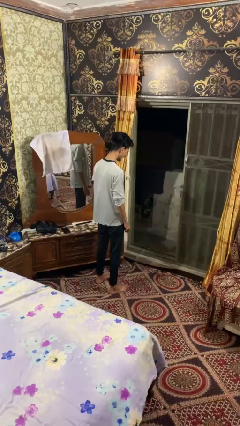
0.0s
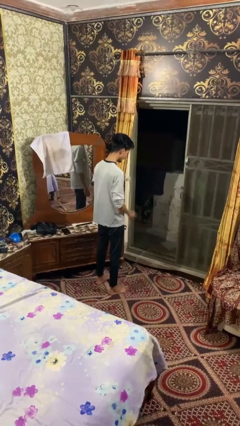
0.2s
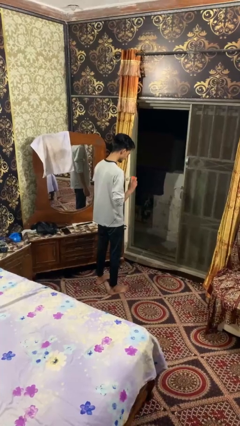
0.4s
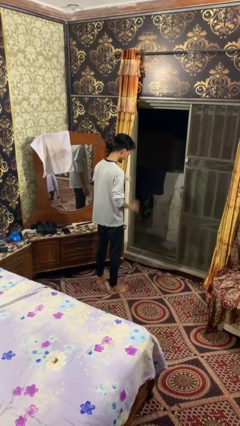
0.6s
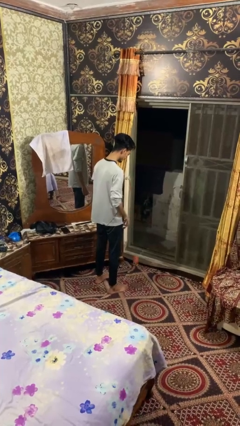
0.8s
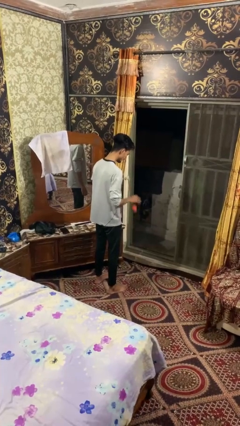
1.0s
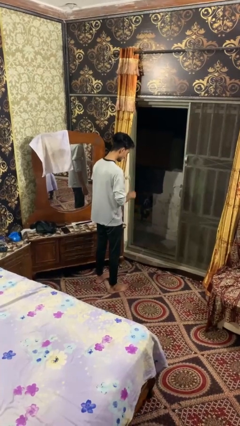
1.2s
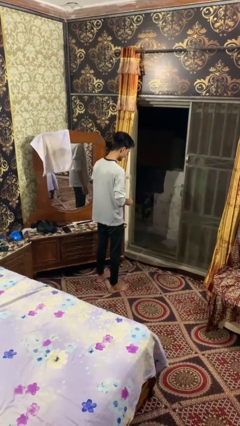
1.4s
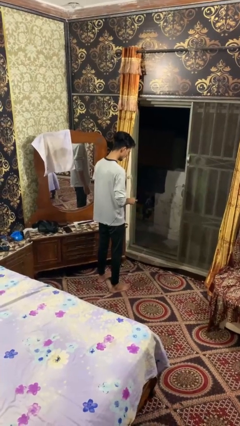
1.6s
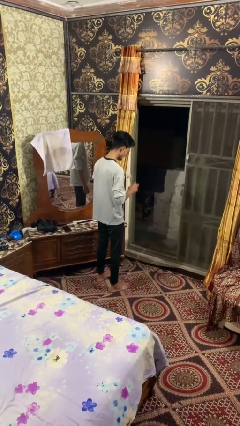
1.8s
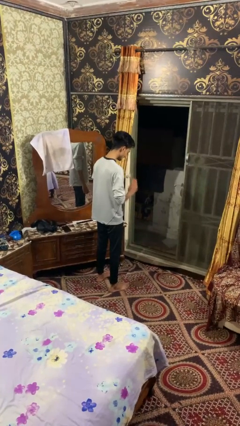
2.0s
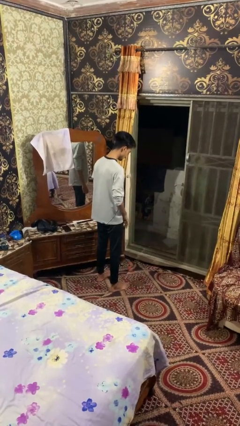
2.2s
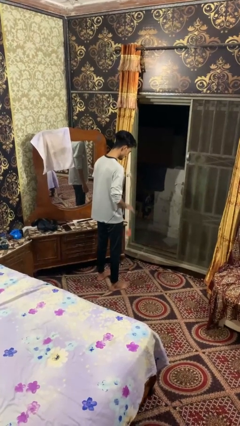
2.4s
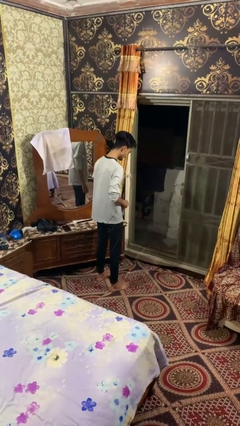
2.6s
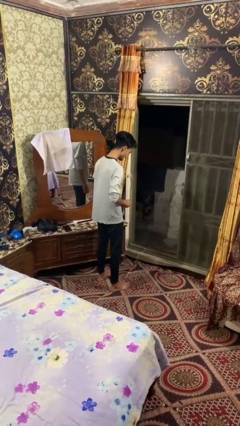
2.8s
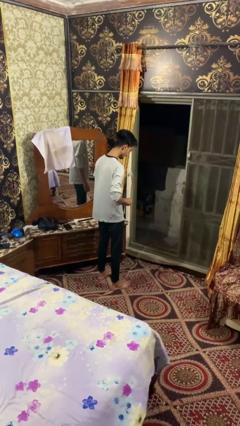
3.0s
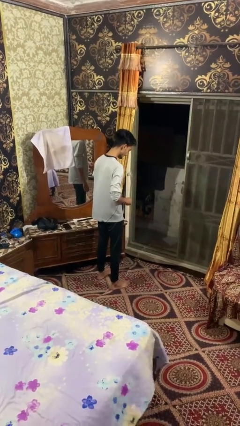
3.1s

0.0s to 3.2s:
person bounces ball on floor

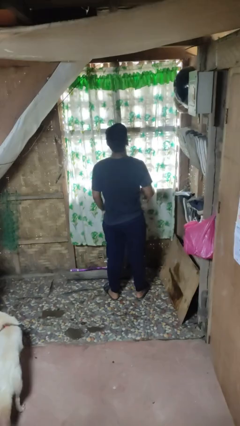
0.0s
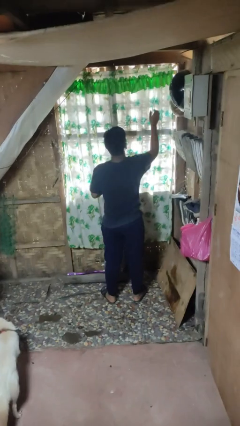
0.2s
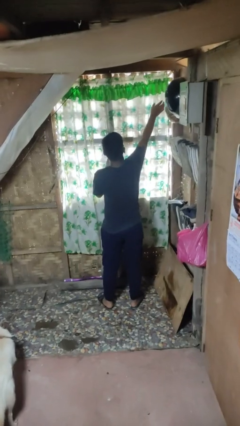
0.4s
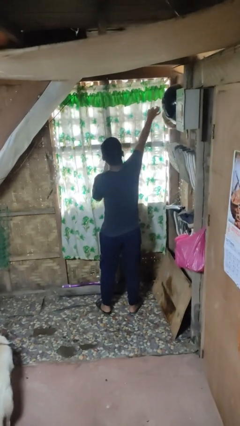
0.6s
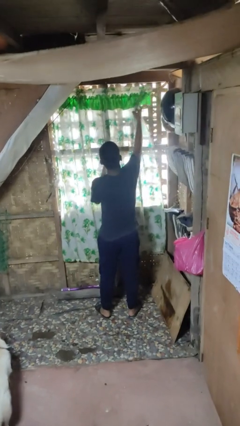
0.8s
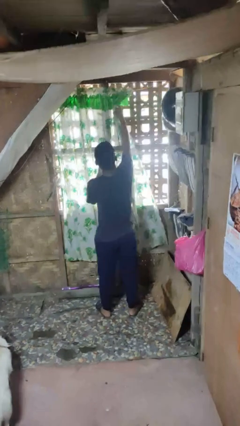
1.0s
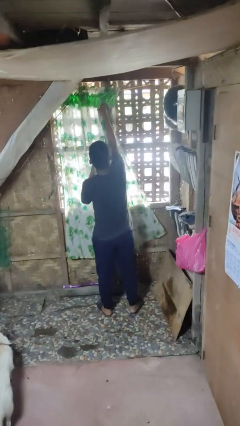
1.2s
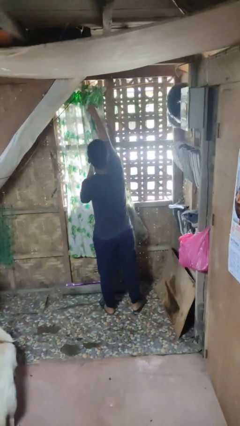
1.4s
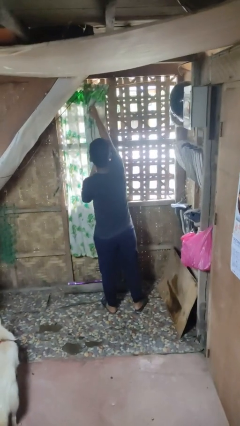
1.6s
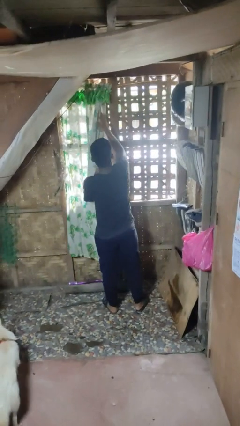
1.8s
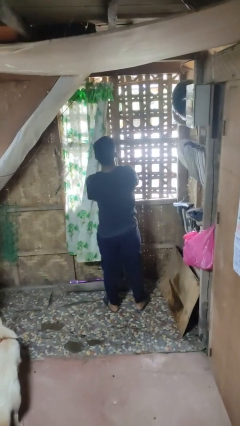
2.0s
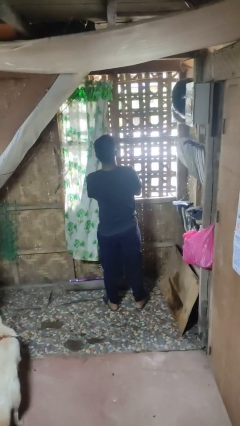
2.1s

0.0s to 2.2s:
person opens curtains

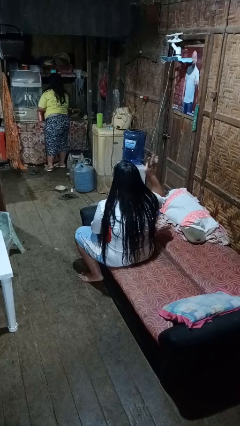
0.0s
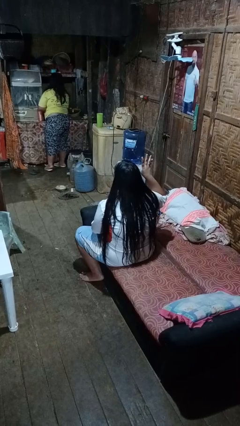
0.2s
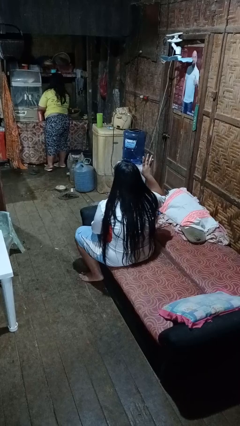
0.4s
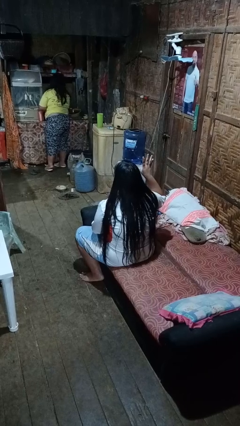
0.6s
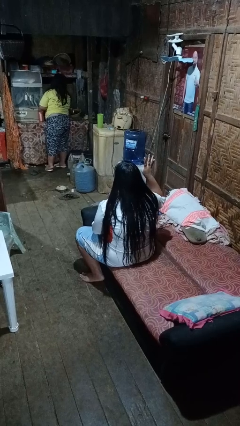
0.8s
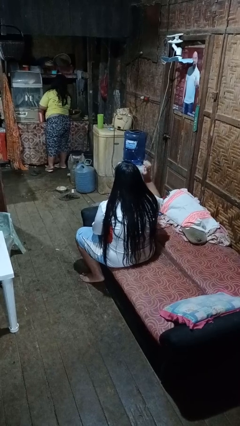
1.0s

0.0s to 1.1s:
person gestures number four

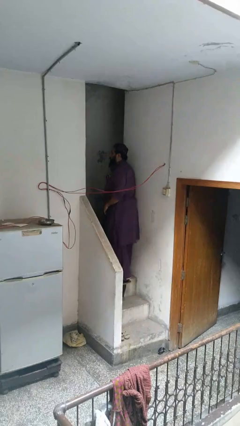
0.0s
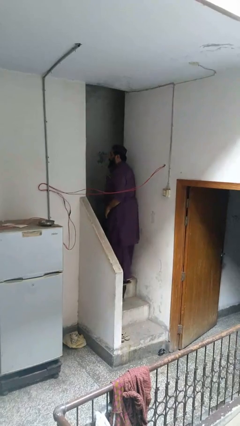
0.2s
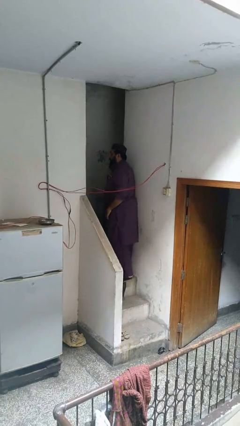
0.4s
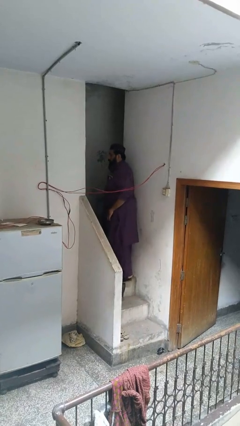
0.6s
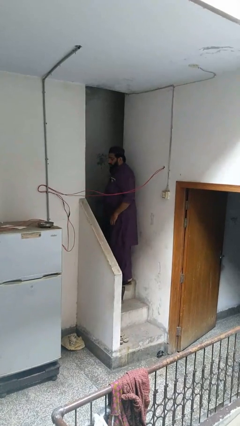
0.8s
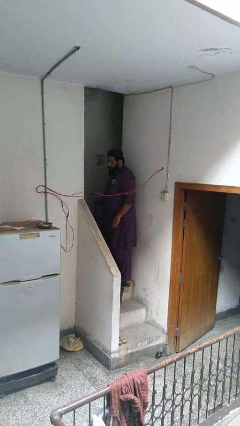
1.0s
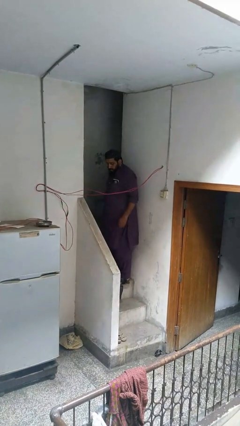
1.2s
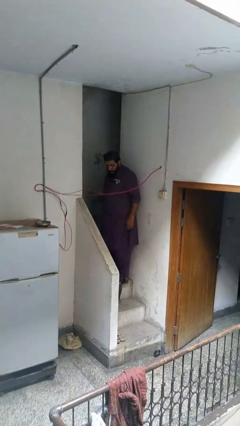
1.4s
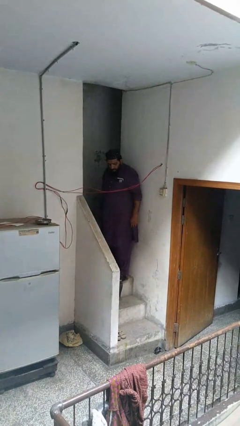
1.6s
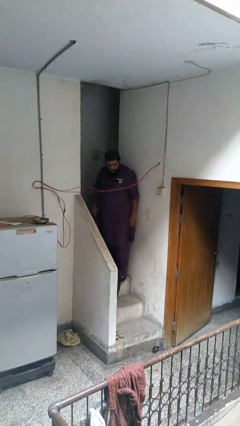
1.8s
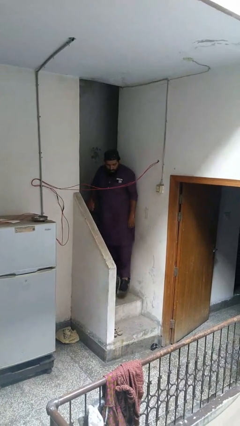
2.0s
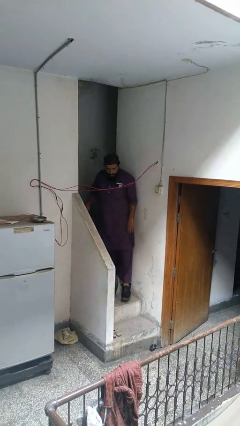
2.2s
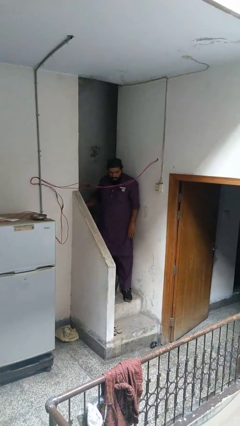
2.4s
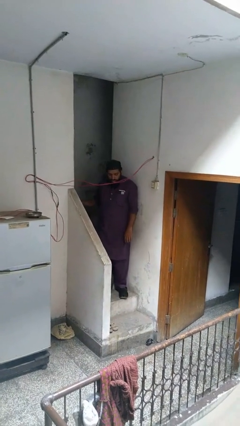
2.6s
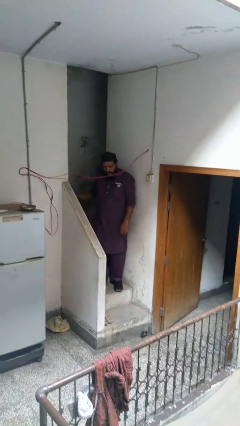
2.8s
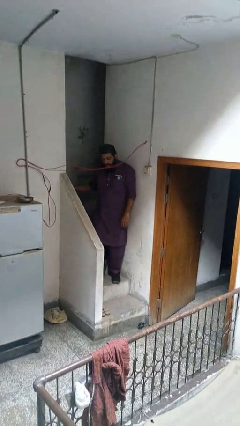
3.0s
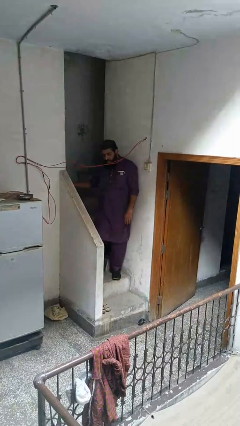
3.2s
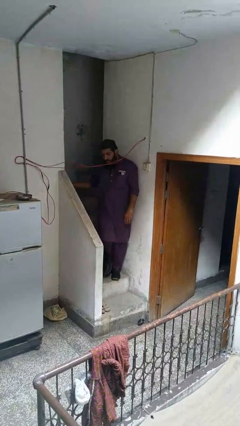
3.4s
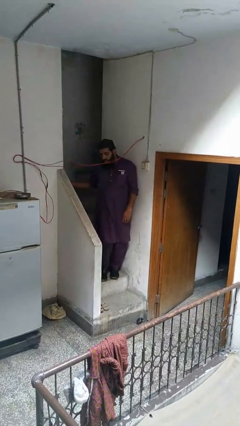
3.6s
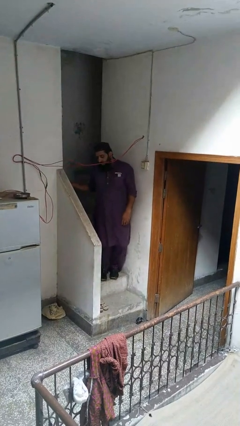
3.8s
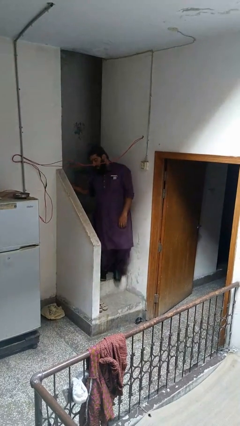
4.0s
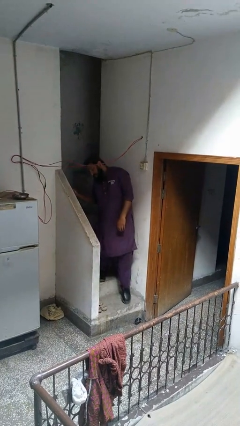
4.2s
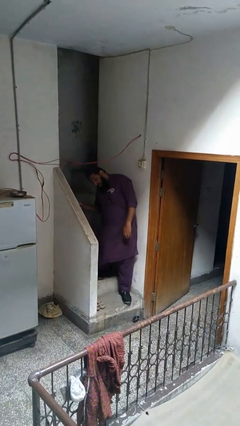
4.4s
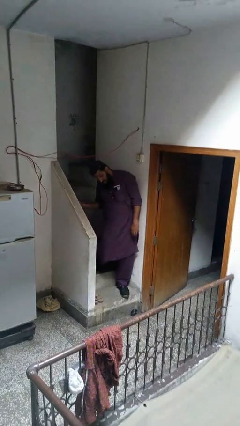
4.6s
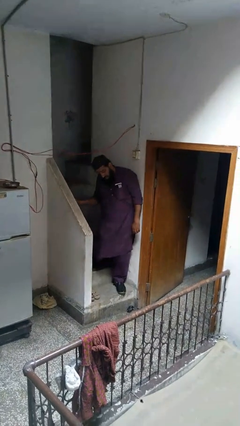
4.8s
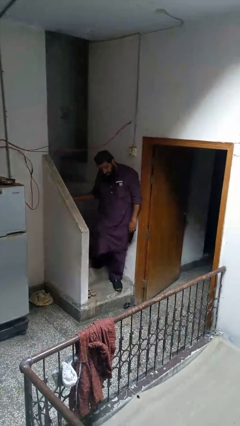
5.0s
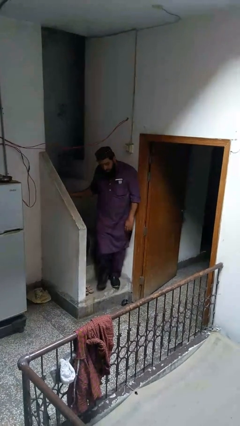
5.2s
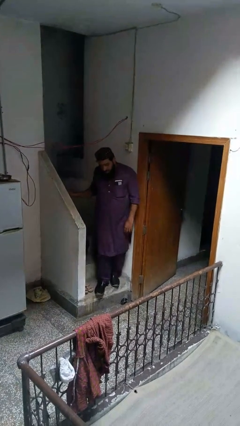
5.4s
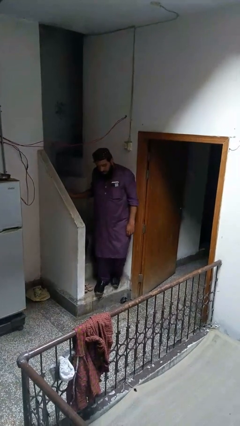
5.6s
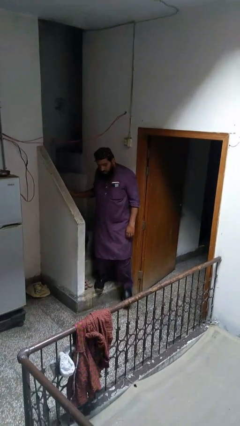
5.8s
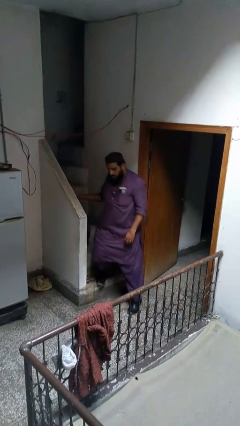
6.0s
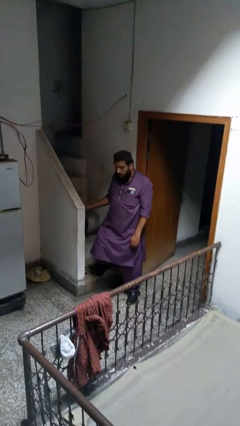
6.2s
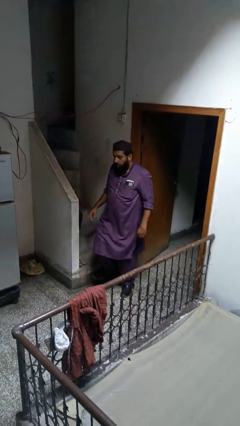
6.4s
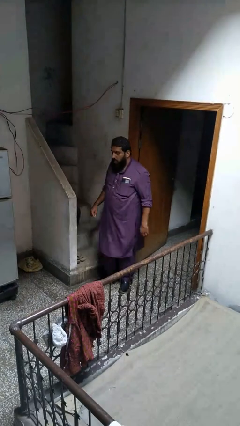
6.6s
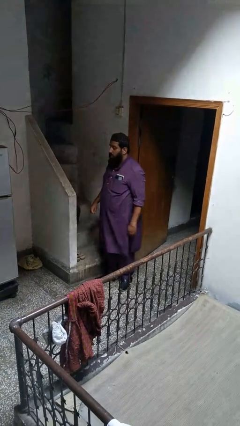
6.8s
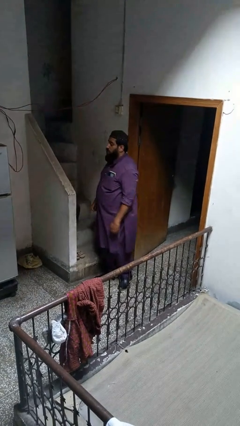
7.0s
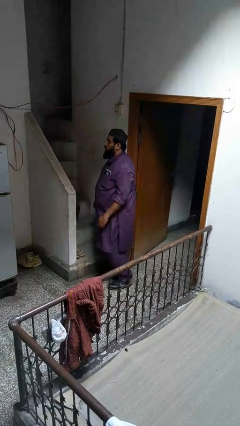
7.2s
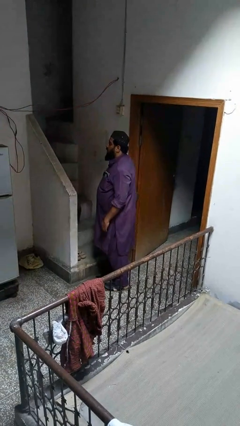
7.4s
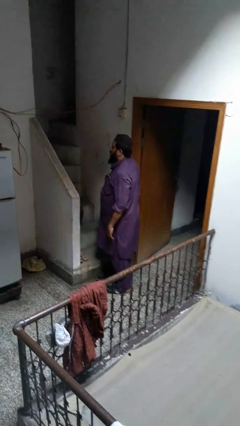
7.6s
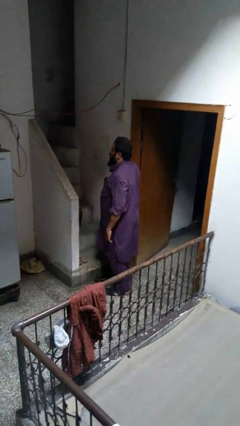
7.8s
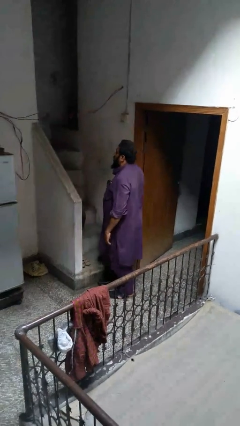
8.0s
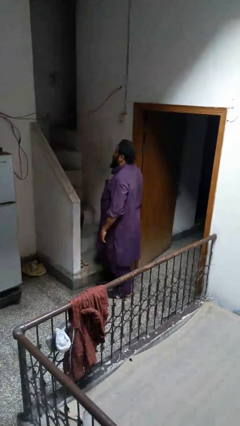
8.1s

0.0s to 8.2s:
person climbs down stairs

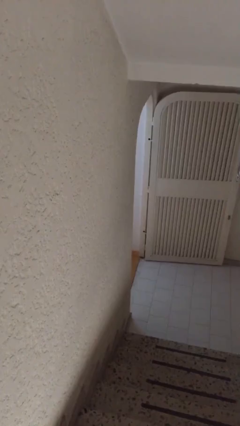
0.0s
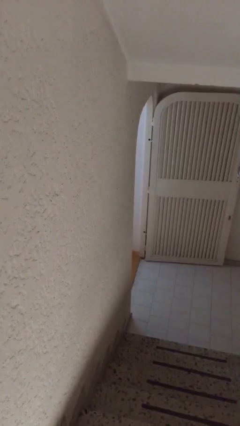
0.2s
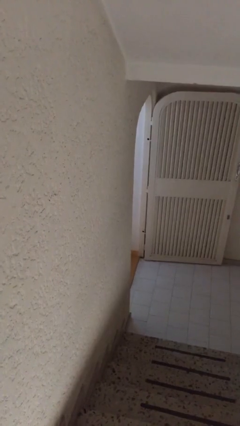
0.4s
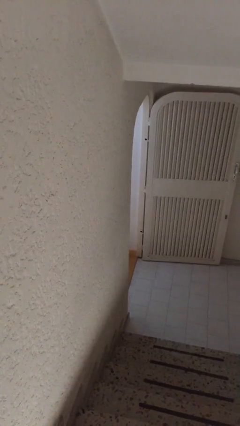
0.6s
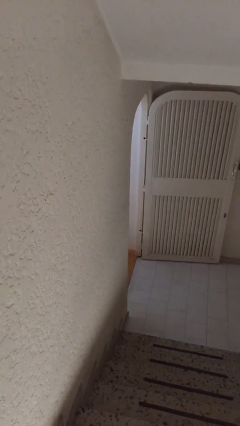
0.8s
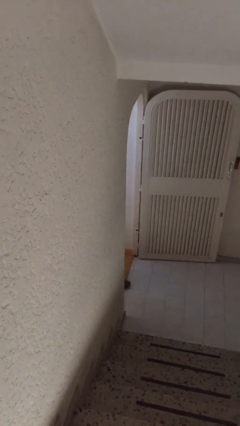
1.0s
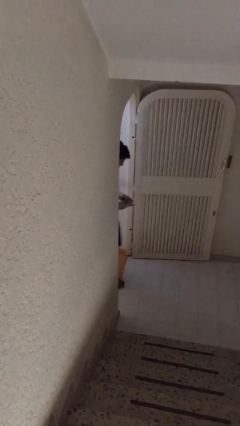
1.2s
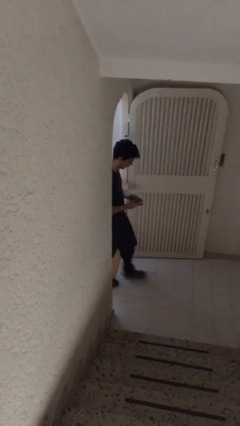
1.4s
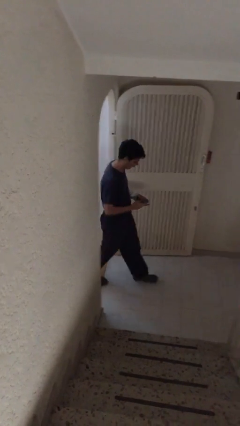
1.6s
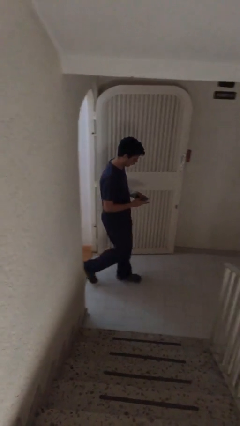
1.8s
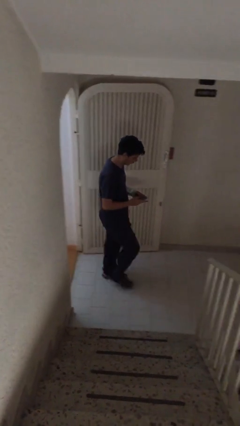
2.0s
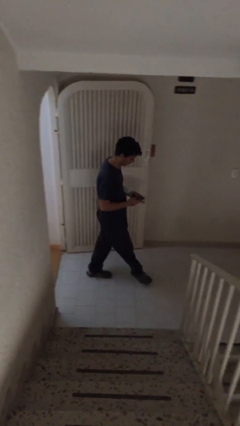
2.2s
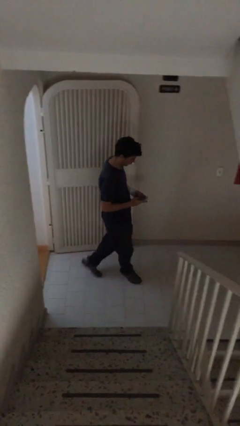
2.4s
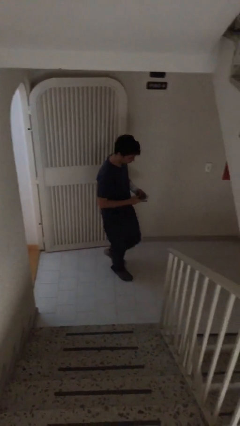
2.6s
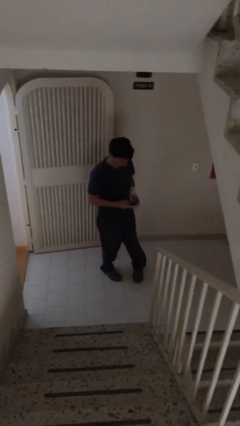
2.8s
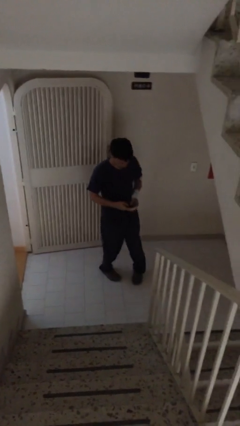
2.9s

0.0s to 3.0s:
person enters scene through structure

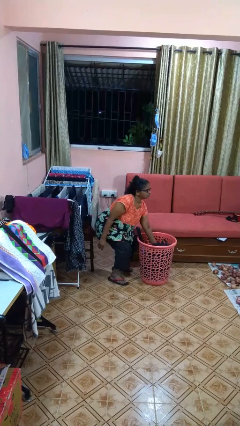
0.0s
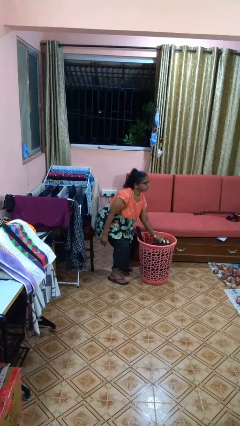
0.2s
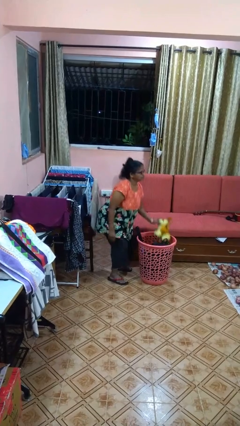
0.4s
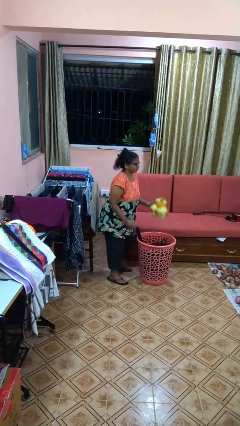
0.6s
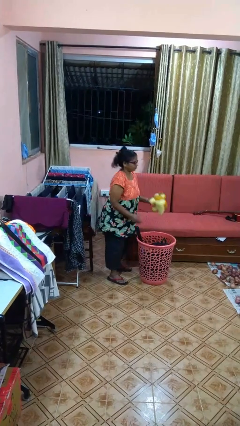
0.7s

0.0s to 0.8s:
person takes object from basket
